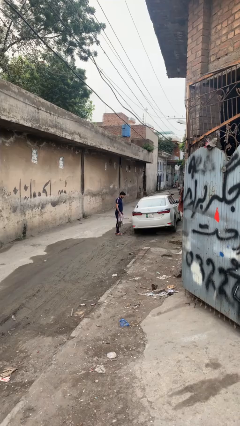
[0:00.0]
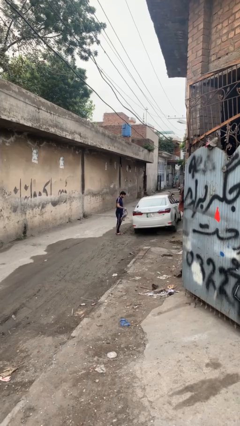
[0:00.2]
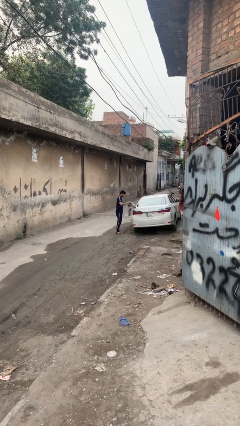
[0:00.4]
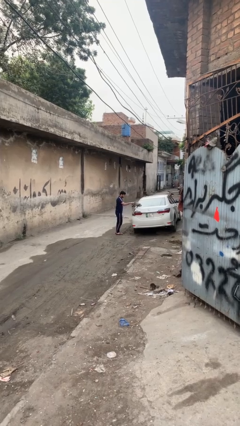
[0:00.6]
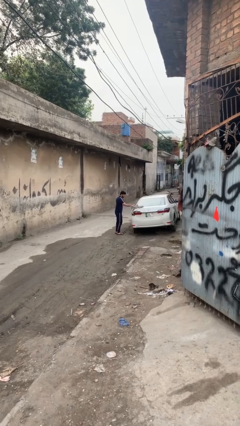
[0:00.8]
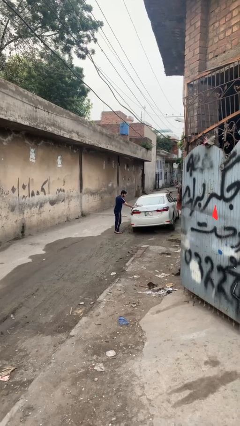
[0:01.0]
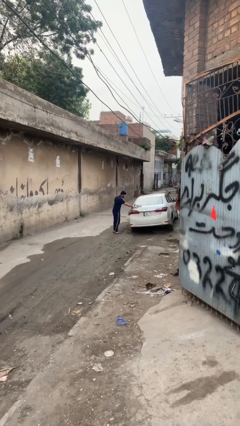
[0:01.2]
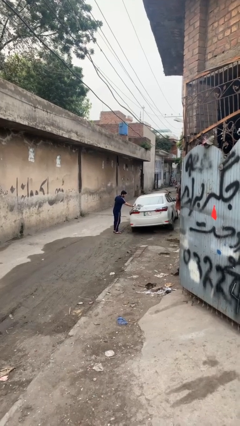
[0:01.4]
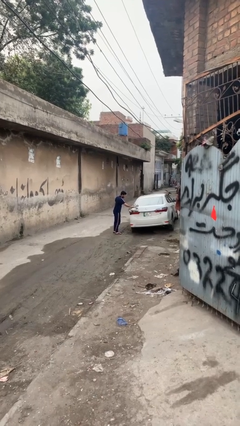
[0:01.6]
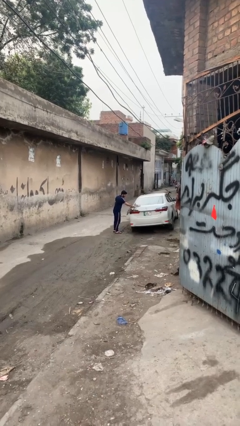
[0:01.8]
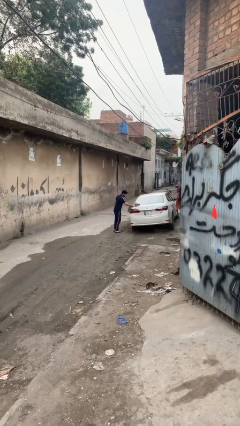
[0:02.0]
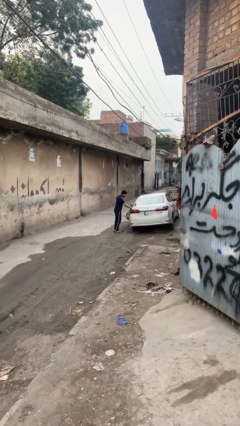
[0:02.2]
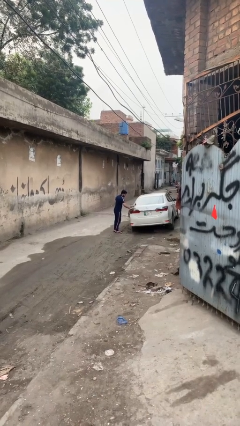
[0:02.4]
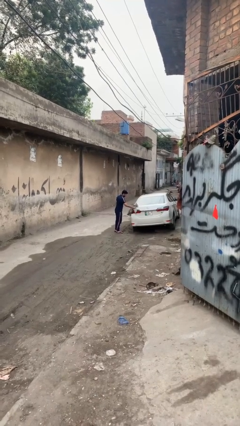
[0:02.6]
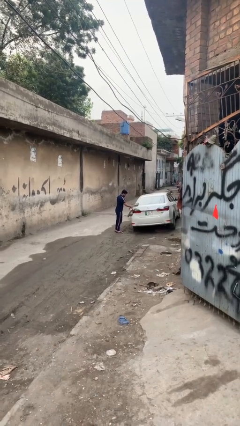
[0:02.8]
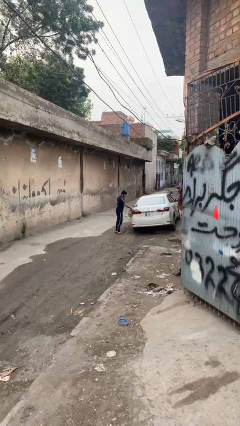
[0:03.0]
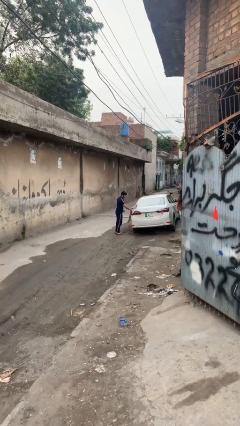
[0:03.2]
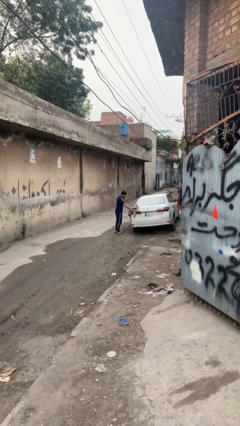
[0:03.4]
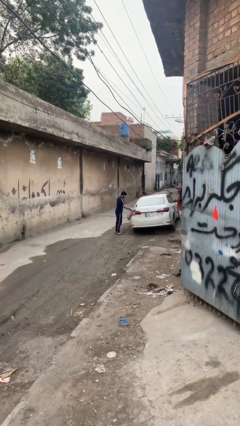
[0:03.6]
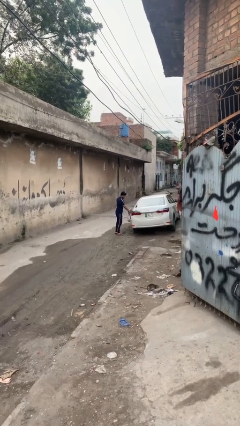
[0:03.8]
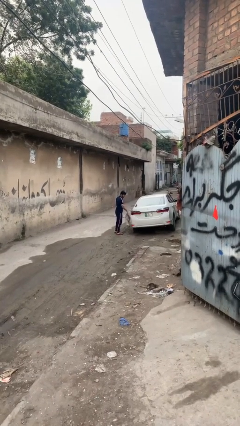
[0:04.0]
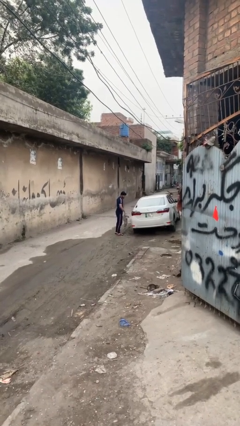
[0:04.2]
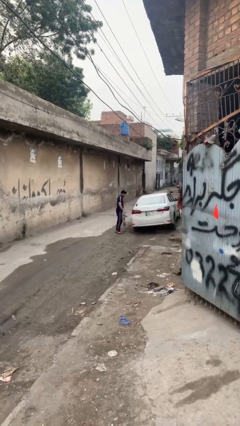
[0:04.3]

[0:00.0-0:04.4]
person polishes car with rag

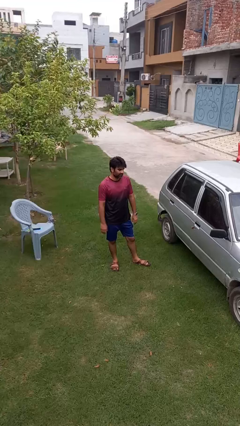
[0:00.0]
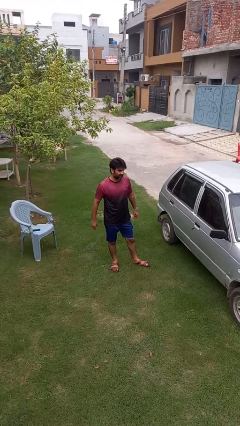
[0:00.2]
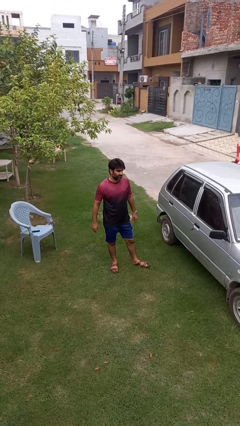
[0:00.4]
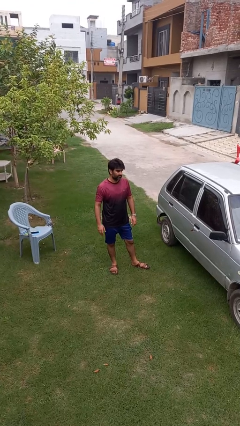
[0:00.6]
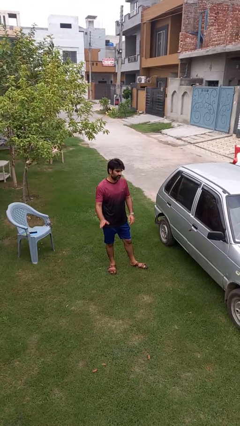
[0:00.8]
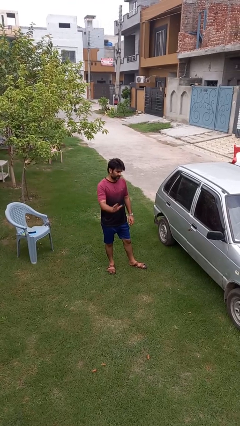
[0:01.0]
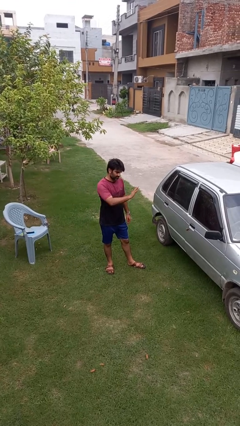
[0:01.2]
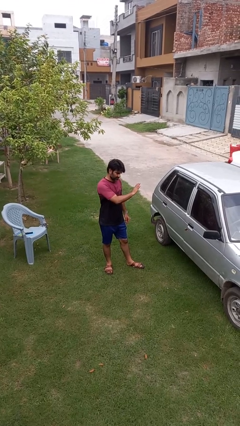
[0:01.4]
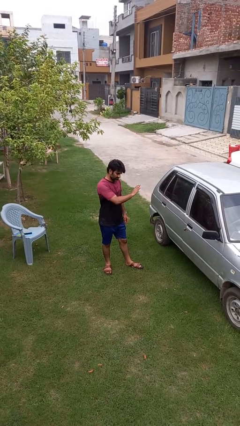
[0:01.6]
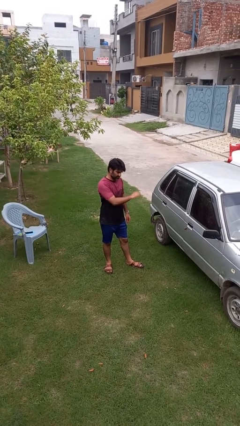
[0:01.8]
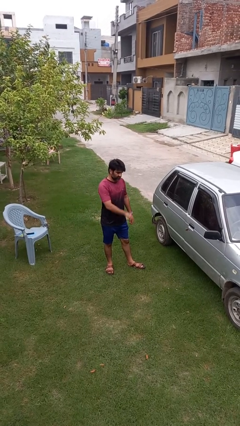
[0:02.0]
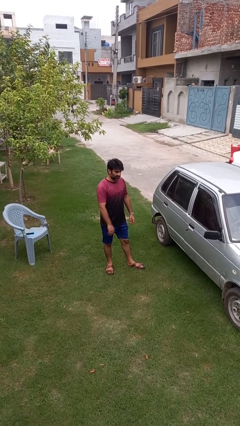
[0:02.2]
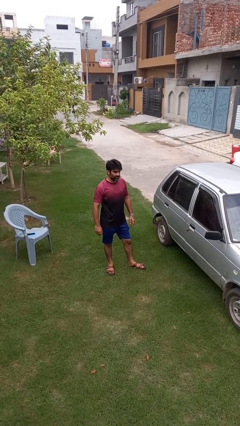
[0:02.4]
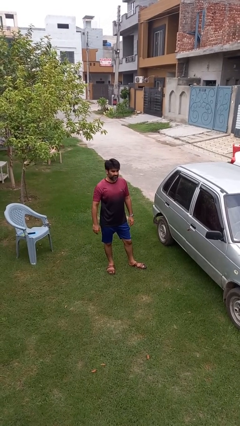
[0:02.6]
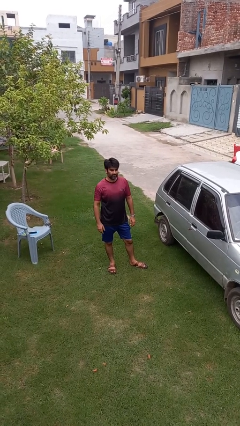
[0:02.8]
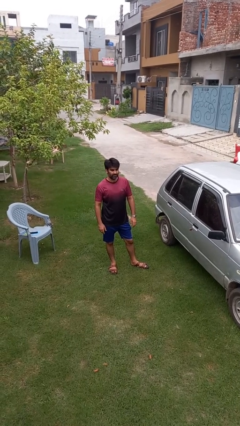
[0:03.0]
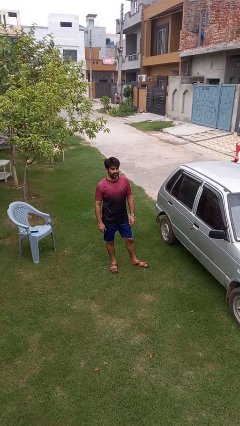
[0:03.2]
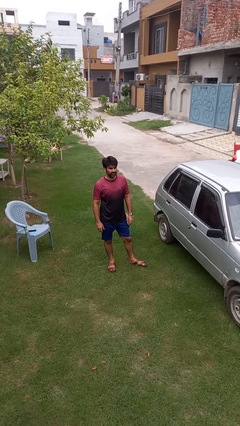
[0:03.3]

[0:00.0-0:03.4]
person gestures swipe left

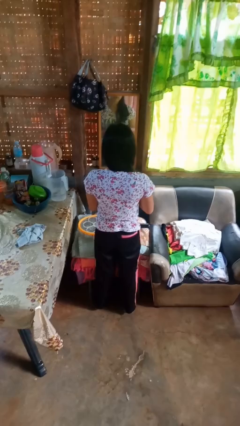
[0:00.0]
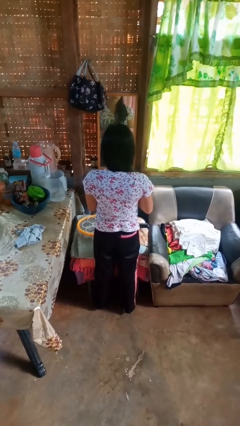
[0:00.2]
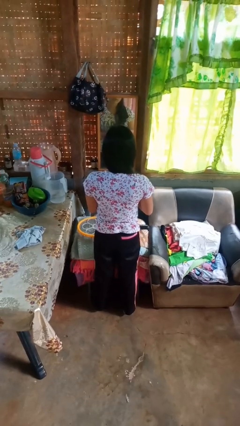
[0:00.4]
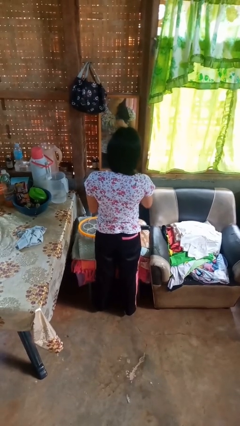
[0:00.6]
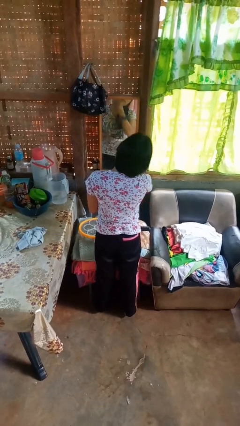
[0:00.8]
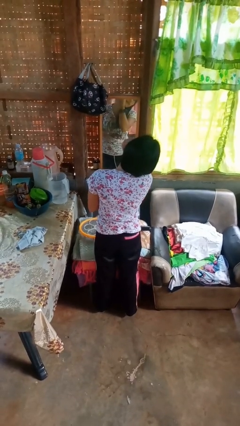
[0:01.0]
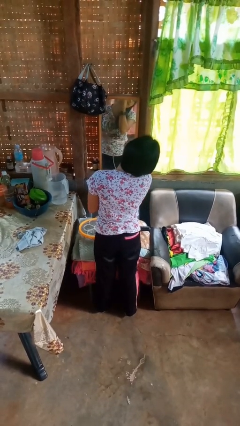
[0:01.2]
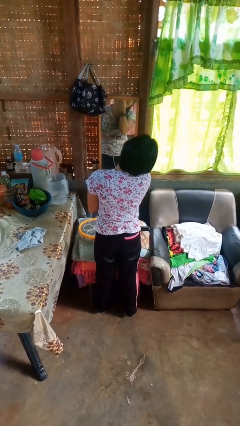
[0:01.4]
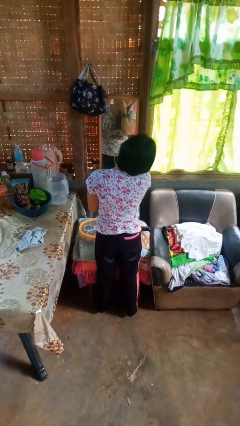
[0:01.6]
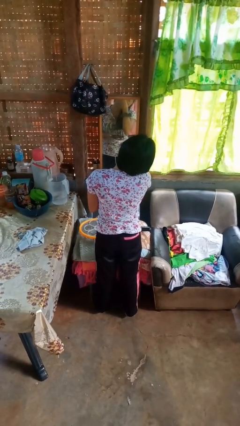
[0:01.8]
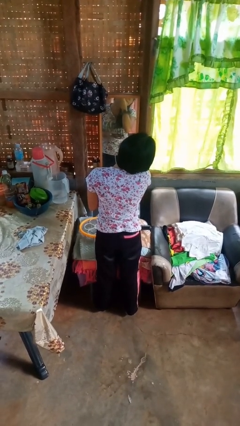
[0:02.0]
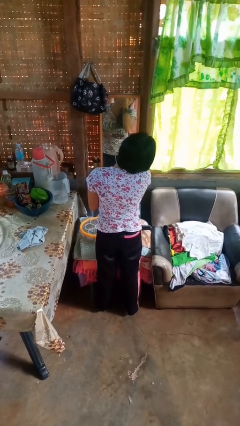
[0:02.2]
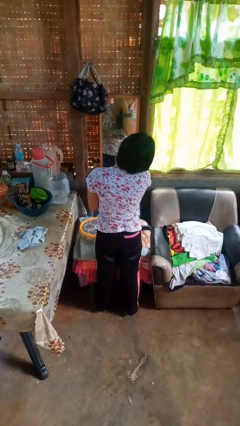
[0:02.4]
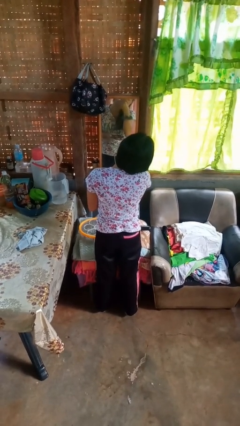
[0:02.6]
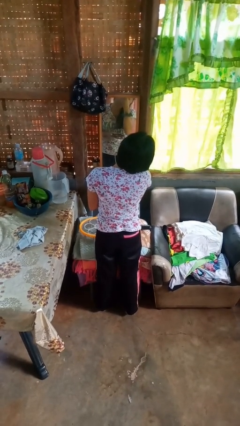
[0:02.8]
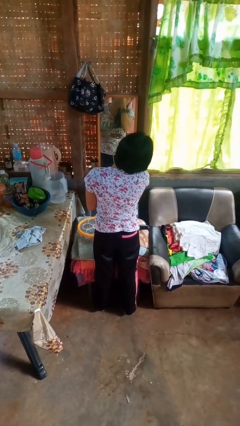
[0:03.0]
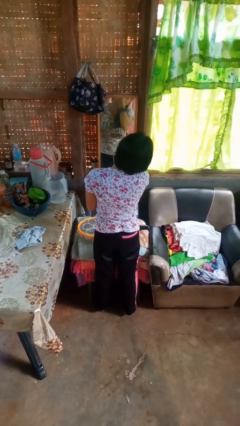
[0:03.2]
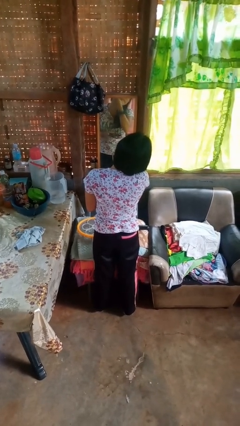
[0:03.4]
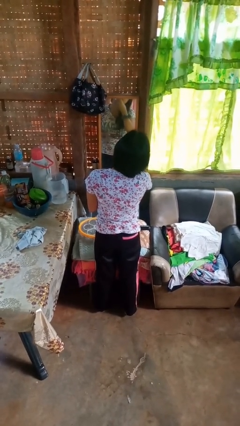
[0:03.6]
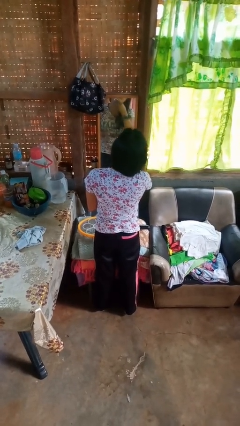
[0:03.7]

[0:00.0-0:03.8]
person applies foundation makeup

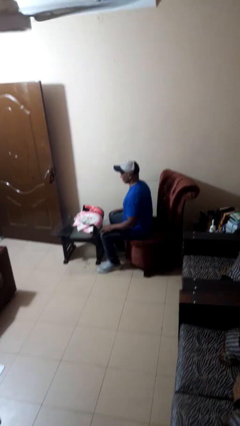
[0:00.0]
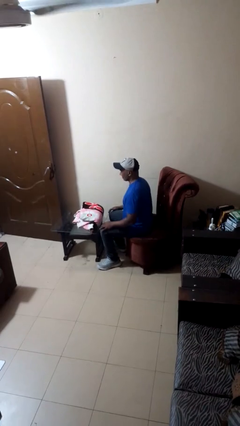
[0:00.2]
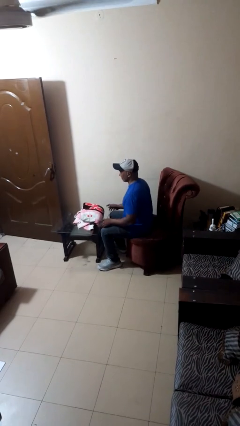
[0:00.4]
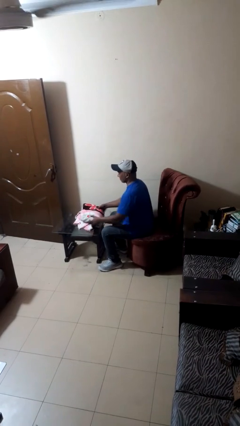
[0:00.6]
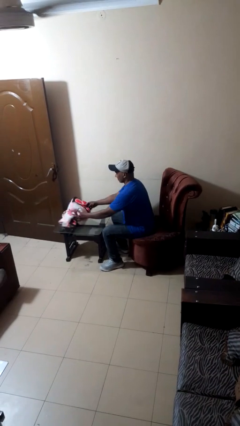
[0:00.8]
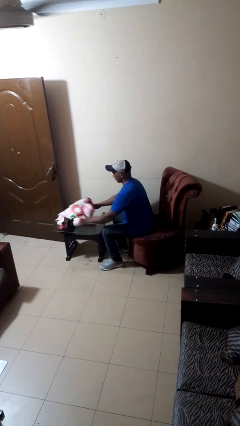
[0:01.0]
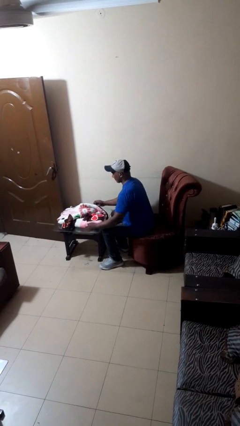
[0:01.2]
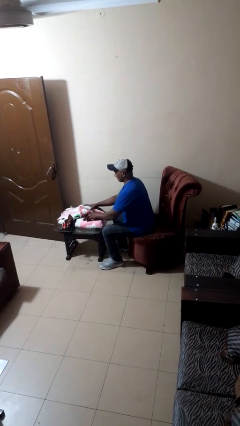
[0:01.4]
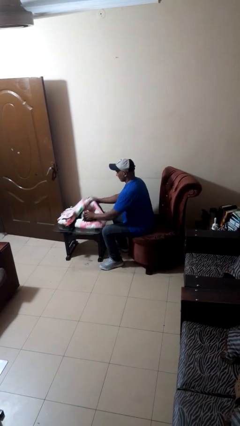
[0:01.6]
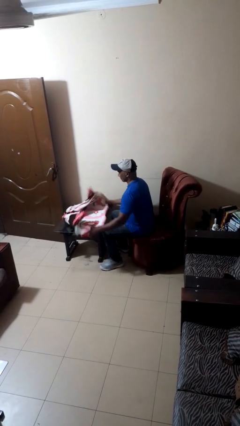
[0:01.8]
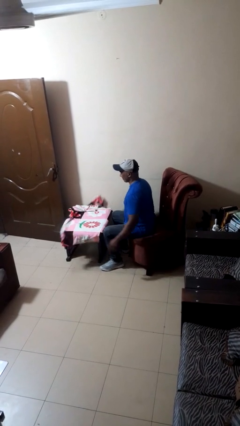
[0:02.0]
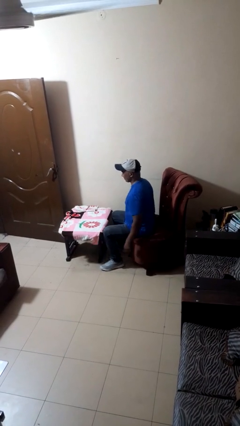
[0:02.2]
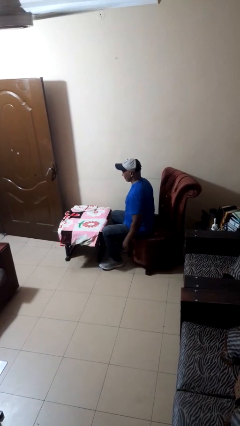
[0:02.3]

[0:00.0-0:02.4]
person unfolds blanket

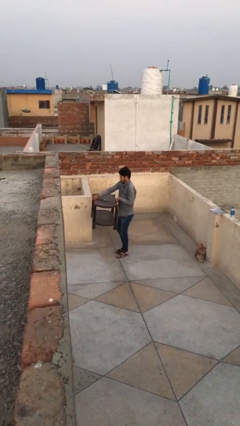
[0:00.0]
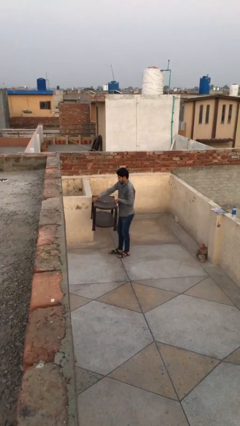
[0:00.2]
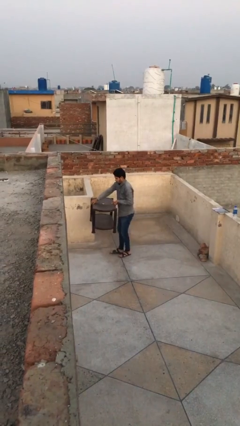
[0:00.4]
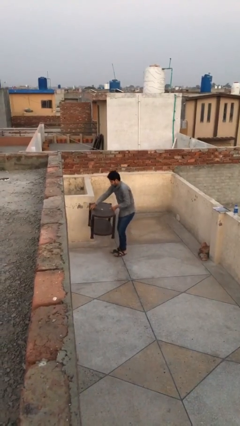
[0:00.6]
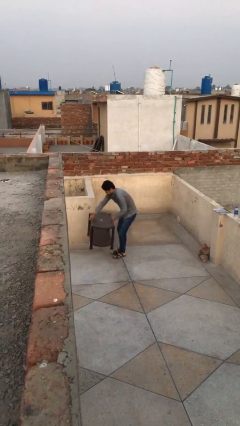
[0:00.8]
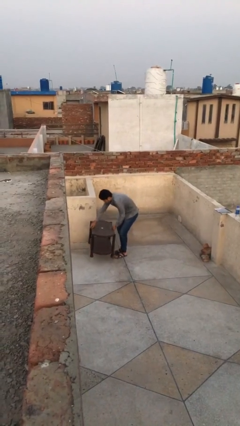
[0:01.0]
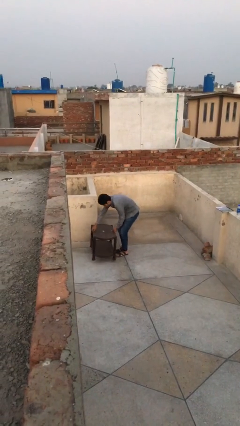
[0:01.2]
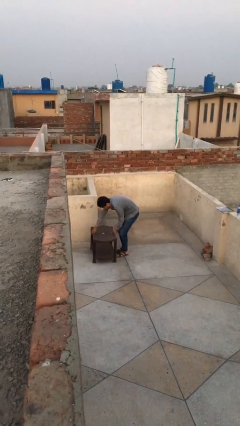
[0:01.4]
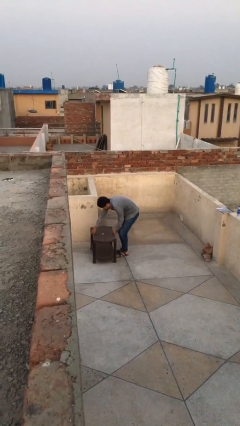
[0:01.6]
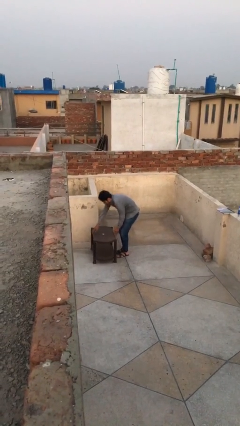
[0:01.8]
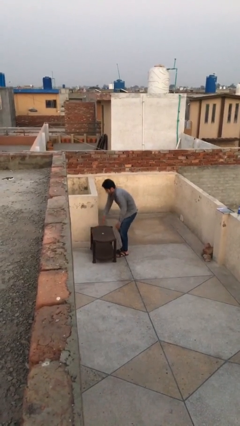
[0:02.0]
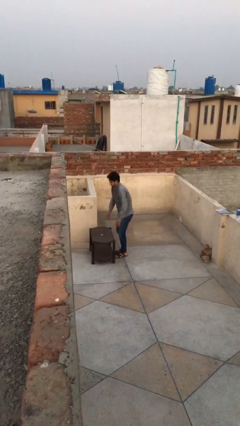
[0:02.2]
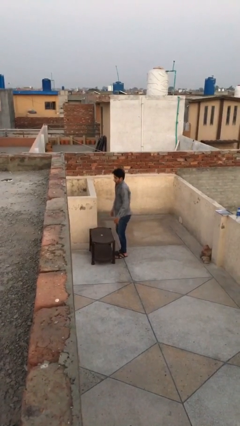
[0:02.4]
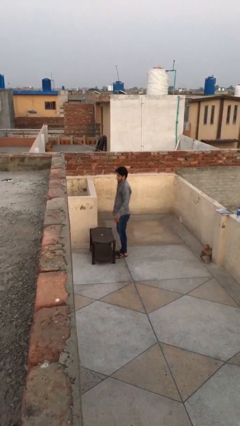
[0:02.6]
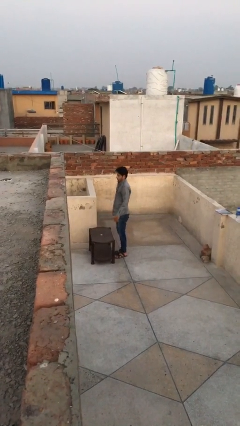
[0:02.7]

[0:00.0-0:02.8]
person puts down object on floor

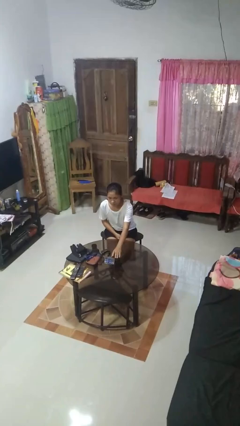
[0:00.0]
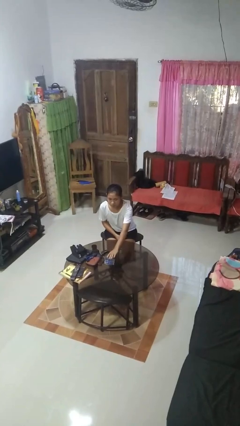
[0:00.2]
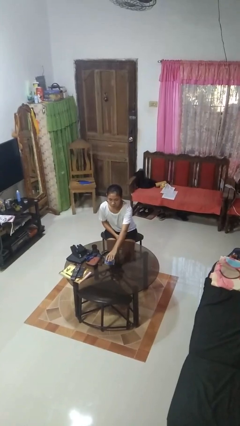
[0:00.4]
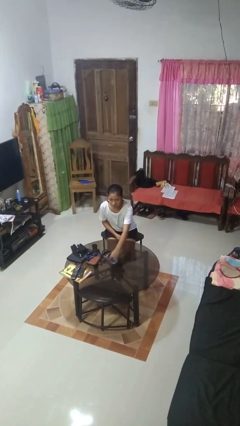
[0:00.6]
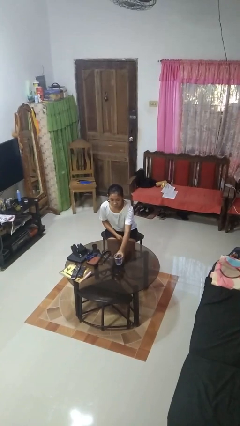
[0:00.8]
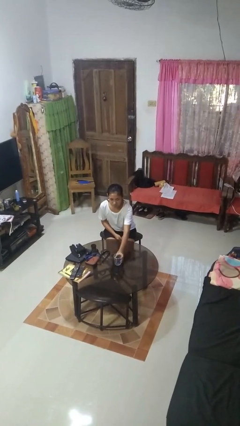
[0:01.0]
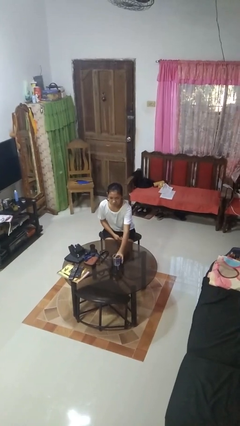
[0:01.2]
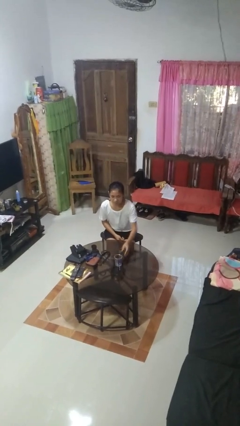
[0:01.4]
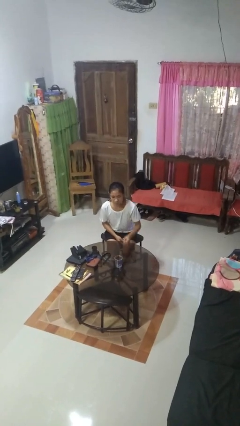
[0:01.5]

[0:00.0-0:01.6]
person sets upright glass
